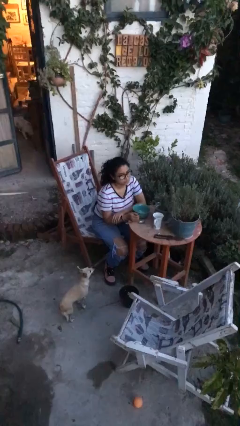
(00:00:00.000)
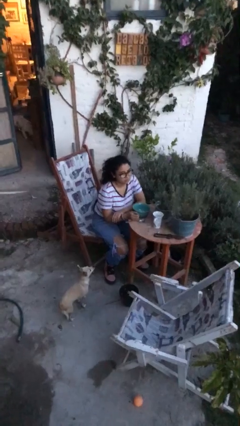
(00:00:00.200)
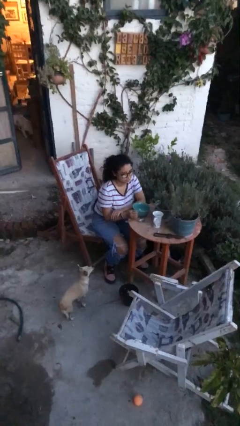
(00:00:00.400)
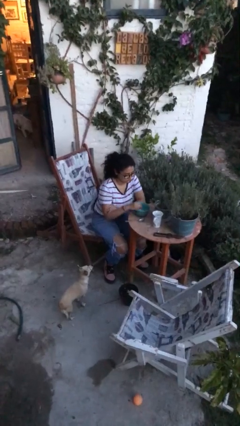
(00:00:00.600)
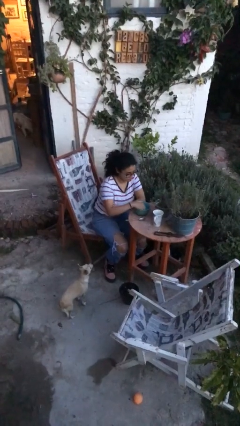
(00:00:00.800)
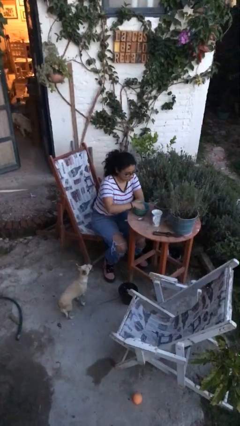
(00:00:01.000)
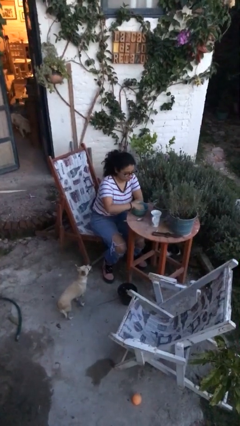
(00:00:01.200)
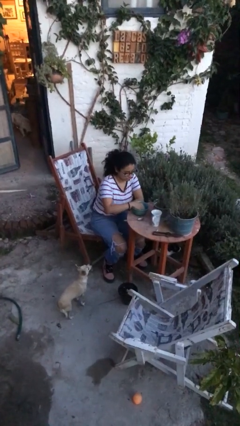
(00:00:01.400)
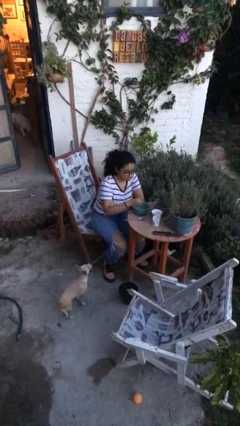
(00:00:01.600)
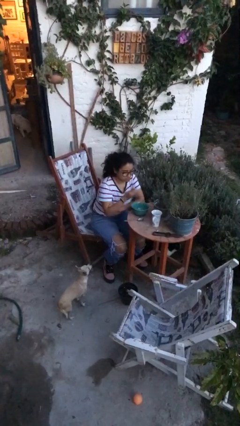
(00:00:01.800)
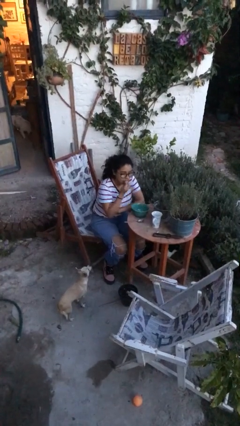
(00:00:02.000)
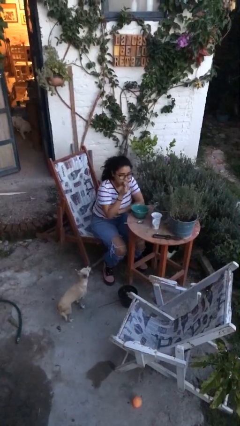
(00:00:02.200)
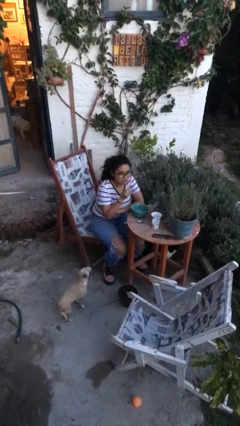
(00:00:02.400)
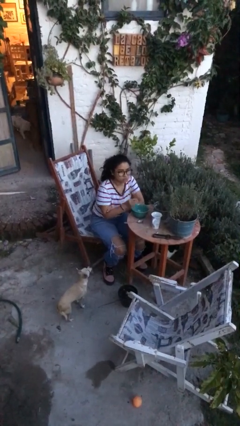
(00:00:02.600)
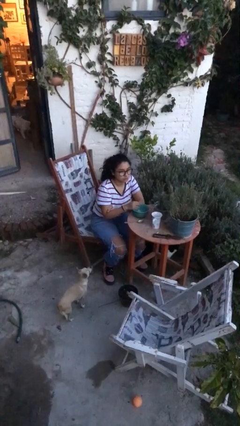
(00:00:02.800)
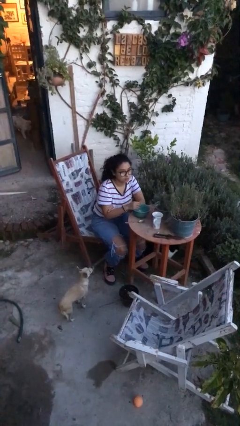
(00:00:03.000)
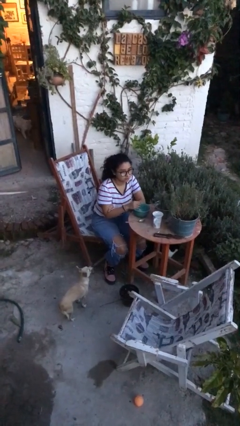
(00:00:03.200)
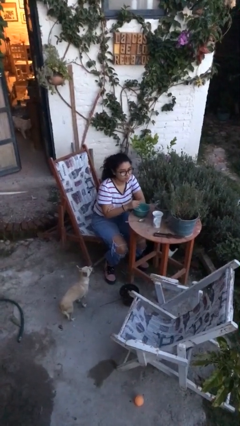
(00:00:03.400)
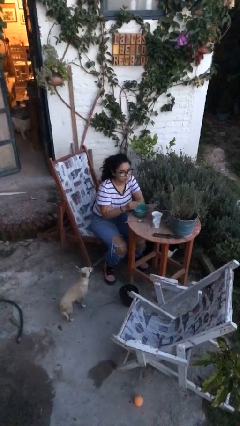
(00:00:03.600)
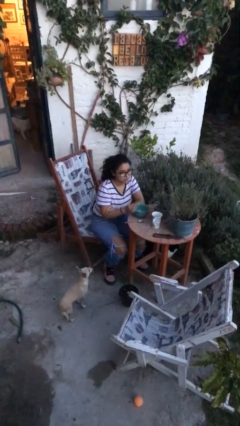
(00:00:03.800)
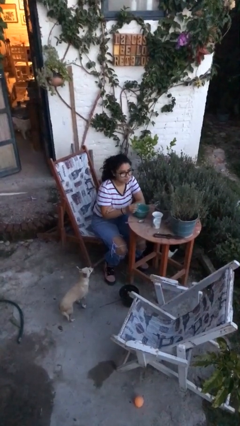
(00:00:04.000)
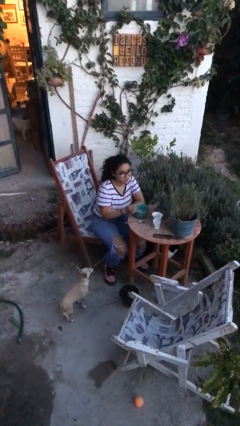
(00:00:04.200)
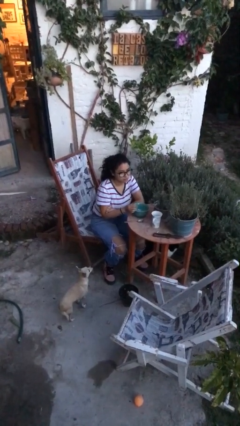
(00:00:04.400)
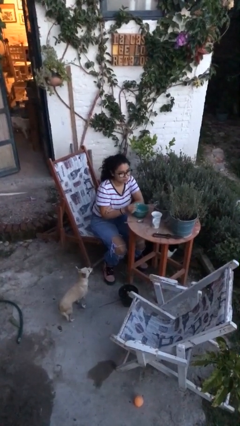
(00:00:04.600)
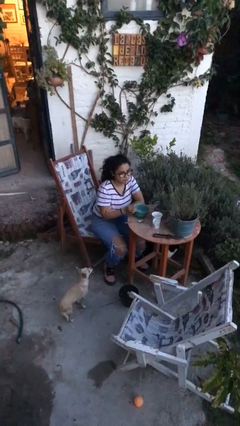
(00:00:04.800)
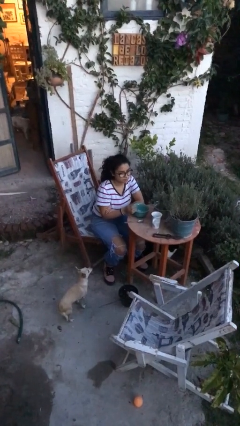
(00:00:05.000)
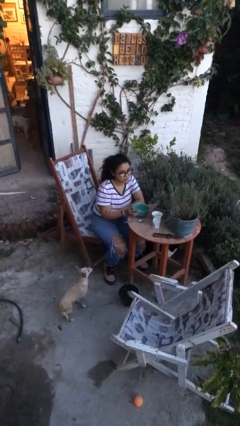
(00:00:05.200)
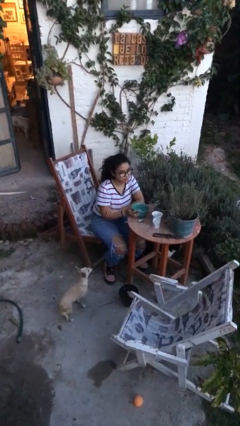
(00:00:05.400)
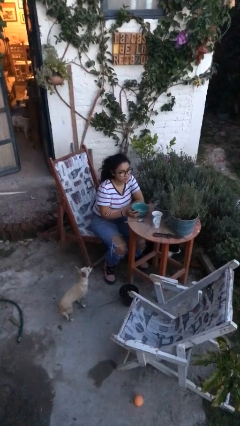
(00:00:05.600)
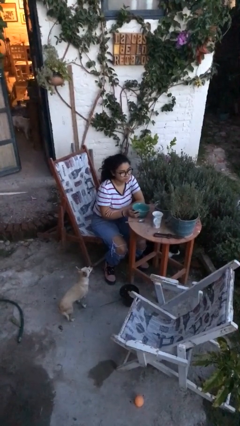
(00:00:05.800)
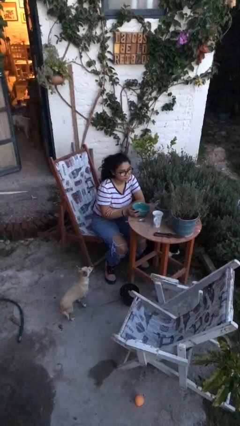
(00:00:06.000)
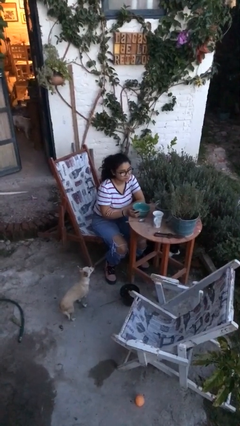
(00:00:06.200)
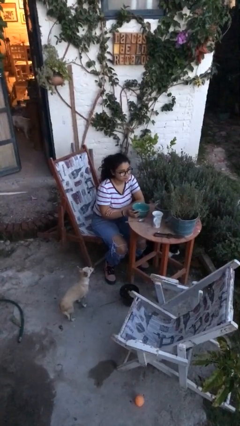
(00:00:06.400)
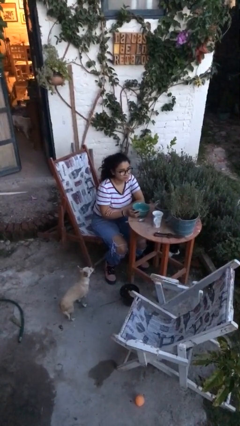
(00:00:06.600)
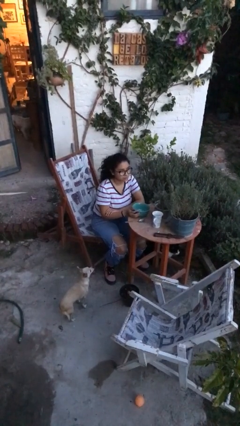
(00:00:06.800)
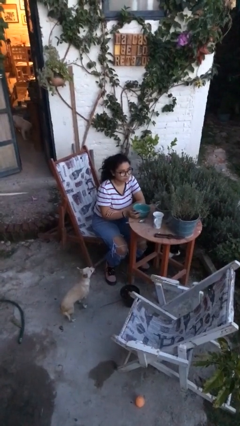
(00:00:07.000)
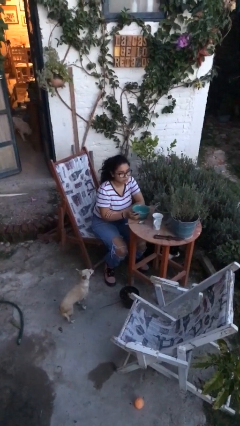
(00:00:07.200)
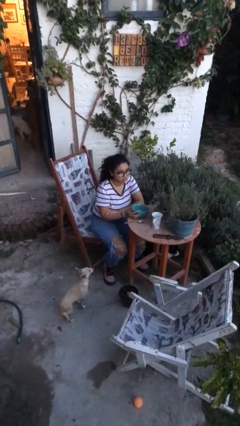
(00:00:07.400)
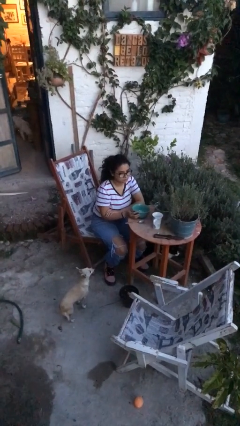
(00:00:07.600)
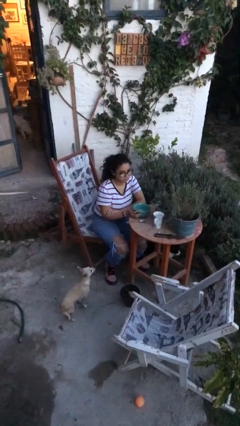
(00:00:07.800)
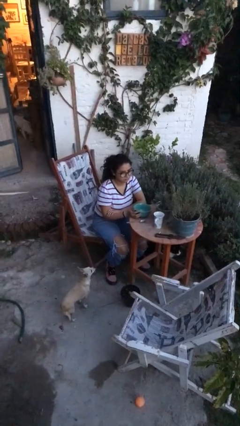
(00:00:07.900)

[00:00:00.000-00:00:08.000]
person eats with hands

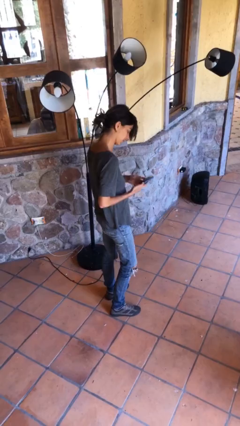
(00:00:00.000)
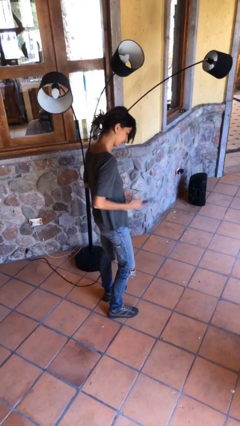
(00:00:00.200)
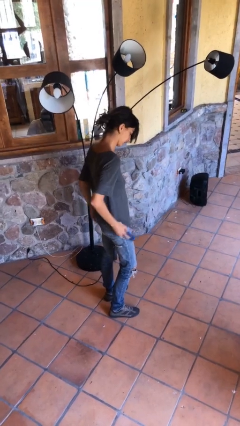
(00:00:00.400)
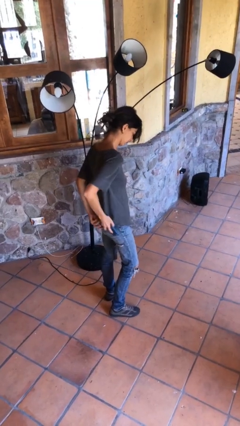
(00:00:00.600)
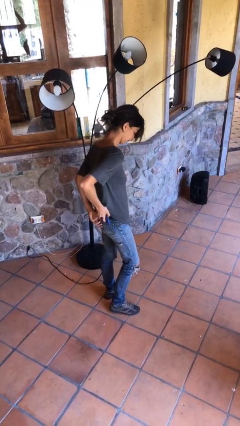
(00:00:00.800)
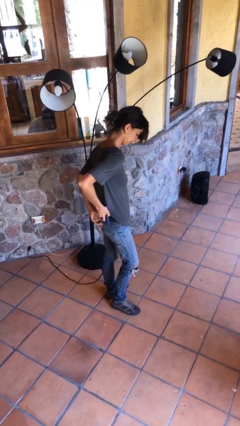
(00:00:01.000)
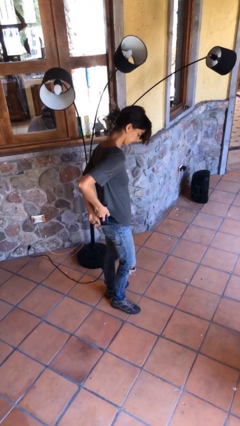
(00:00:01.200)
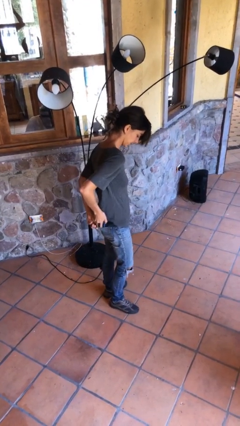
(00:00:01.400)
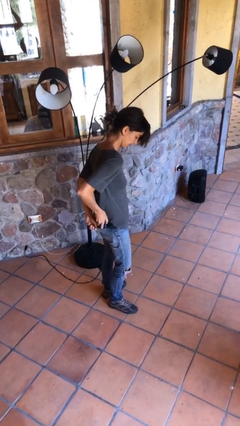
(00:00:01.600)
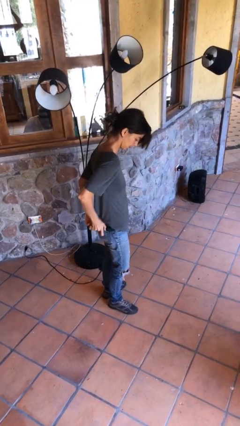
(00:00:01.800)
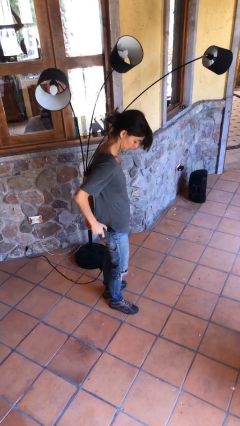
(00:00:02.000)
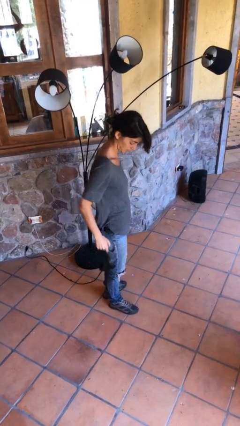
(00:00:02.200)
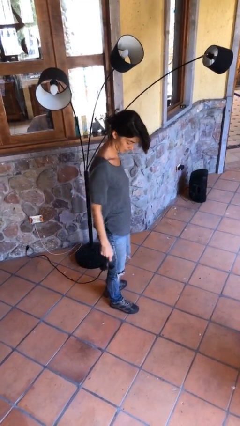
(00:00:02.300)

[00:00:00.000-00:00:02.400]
person puts phone into pocket

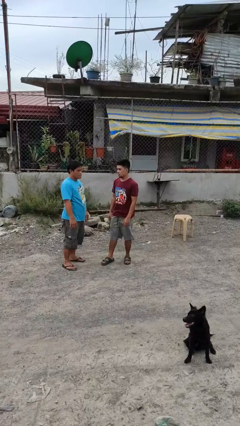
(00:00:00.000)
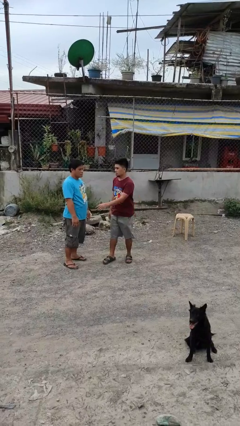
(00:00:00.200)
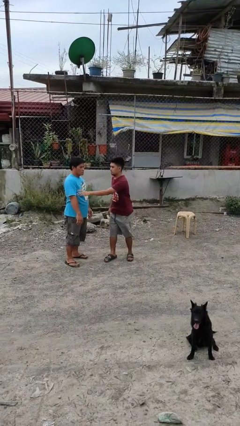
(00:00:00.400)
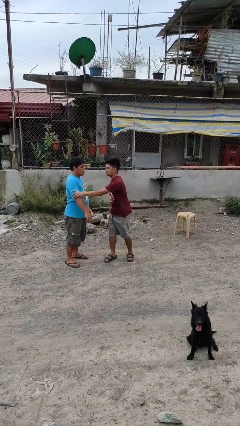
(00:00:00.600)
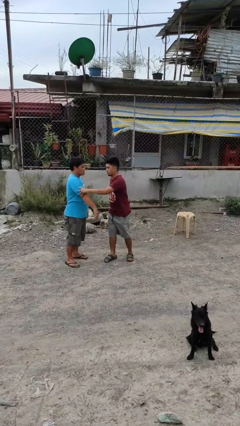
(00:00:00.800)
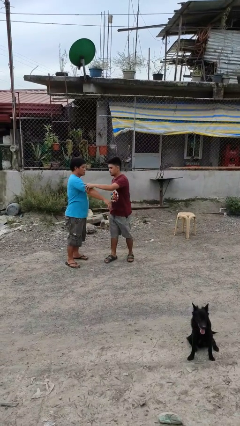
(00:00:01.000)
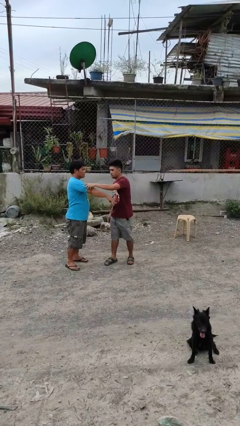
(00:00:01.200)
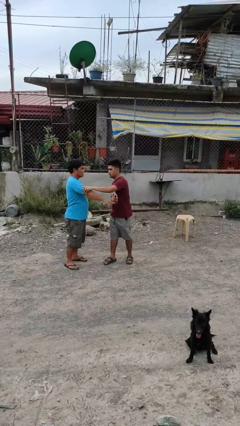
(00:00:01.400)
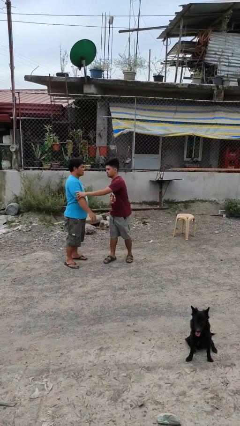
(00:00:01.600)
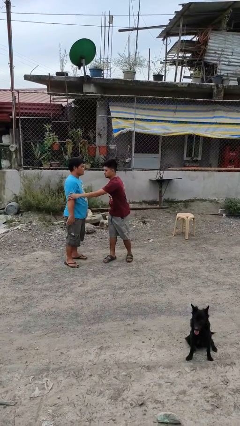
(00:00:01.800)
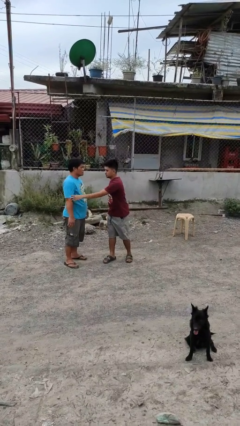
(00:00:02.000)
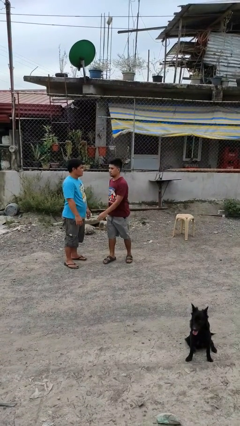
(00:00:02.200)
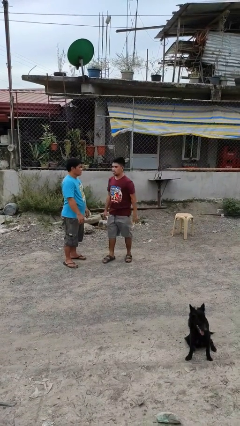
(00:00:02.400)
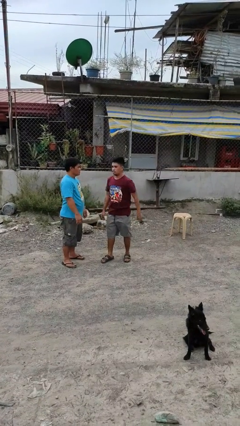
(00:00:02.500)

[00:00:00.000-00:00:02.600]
person grabs person by bicep

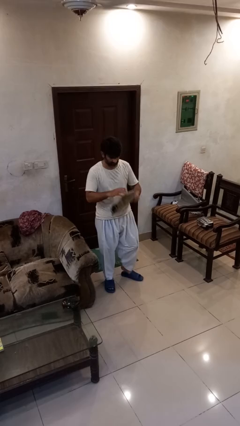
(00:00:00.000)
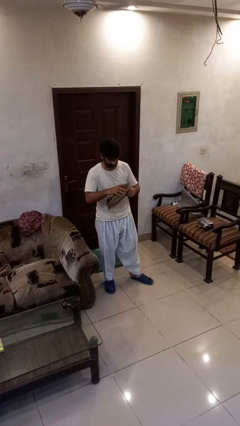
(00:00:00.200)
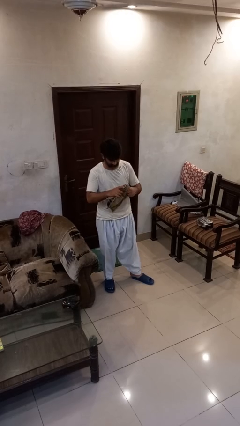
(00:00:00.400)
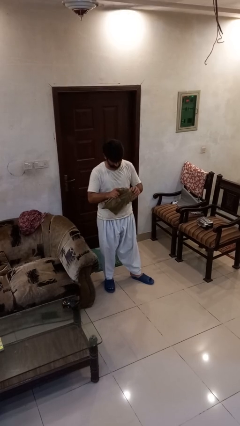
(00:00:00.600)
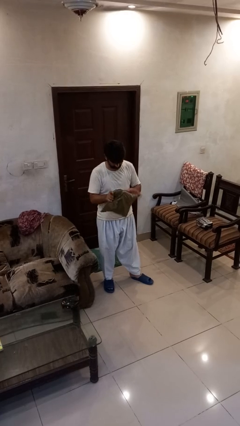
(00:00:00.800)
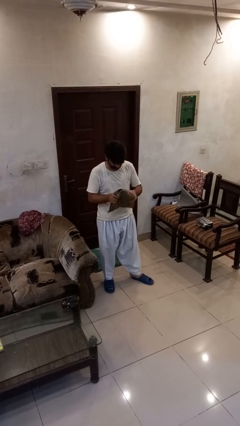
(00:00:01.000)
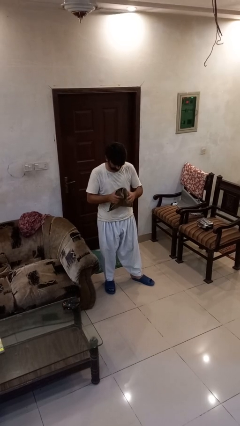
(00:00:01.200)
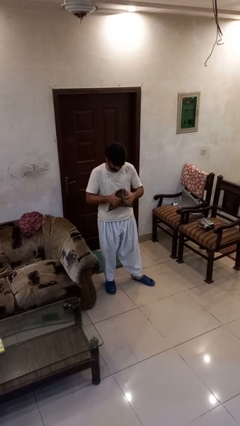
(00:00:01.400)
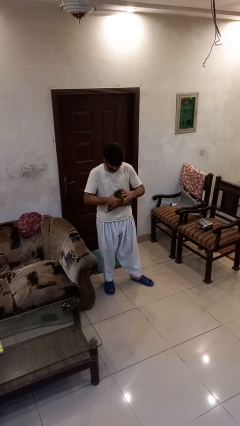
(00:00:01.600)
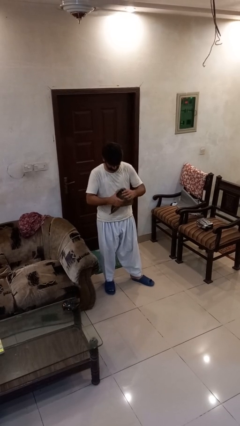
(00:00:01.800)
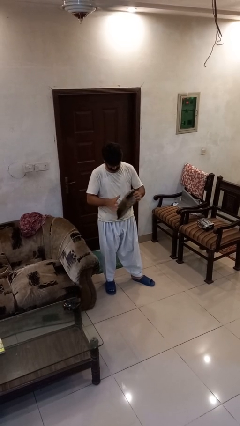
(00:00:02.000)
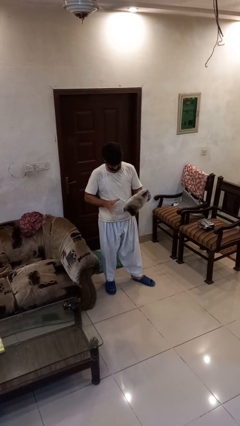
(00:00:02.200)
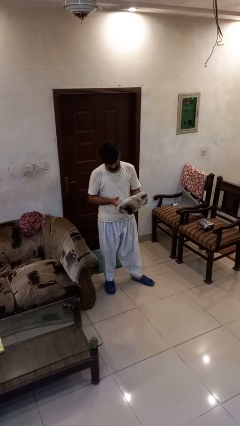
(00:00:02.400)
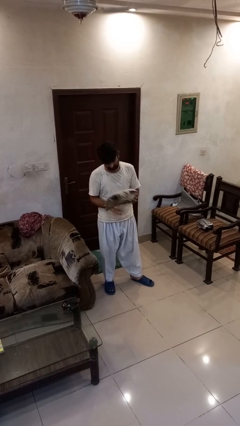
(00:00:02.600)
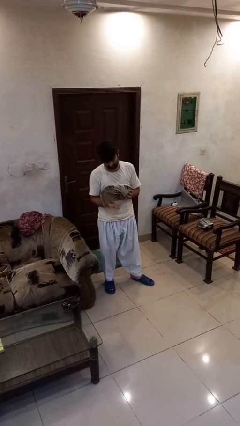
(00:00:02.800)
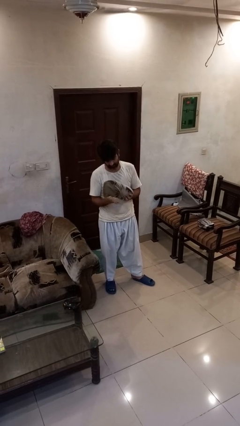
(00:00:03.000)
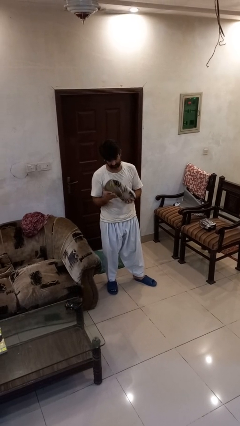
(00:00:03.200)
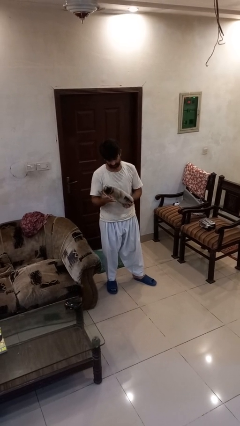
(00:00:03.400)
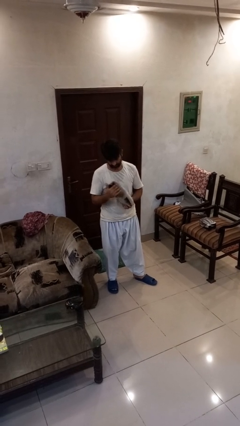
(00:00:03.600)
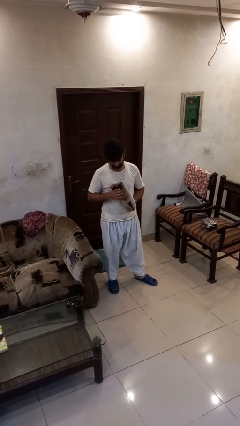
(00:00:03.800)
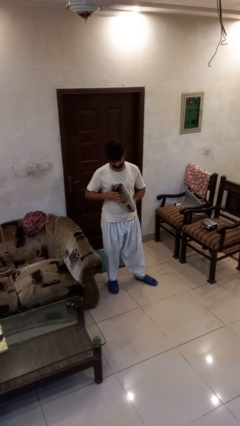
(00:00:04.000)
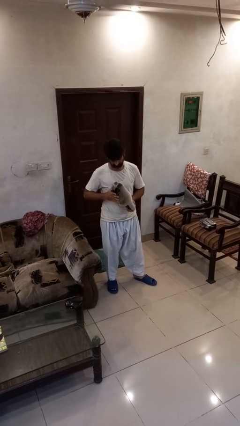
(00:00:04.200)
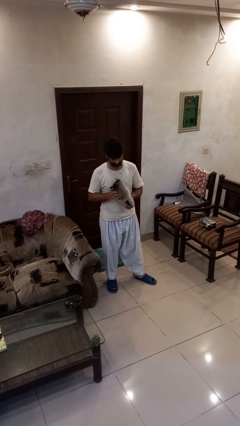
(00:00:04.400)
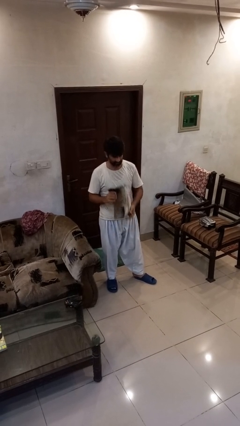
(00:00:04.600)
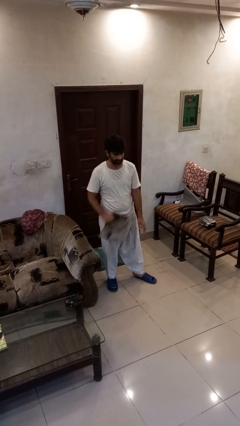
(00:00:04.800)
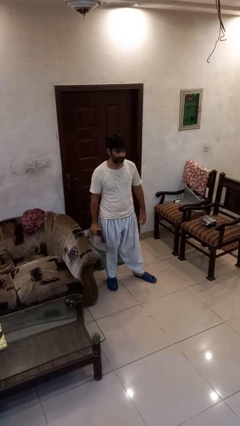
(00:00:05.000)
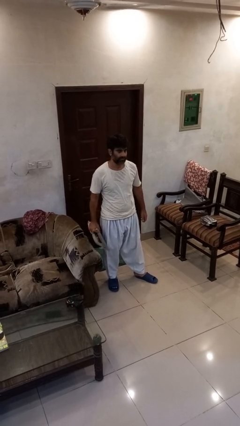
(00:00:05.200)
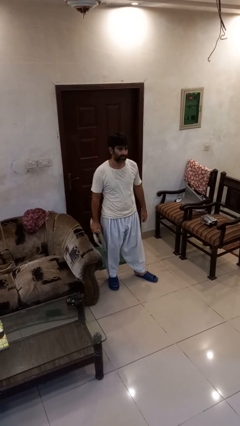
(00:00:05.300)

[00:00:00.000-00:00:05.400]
person squeezes object
